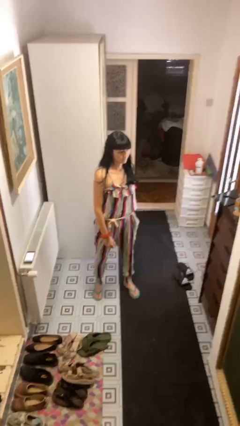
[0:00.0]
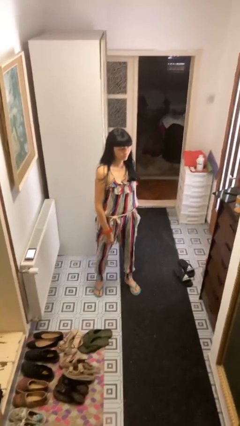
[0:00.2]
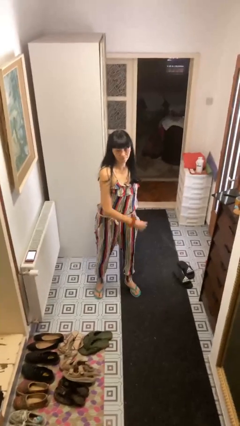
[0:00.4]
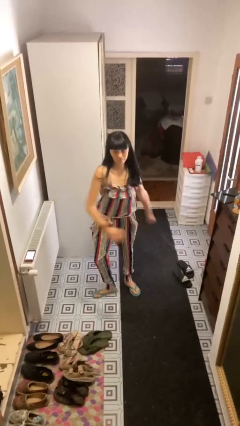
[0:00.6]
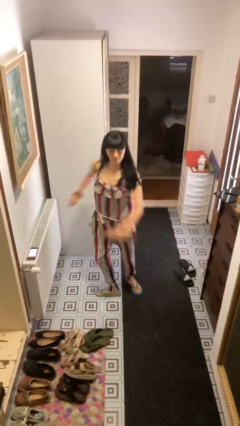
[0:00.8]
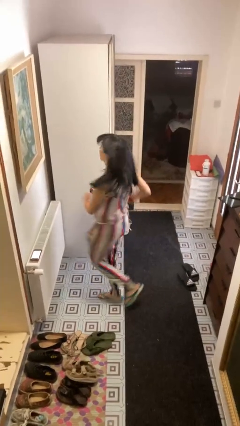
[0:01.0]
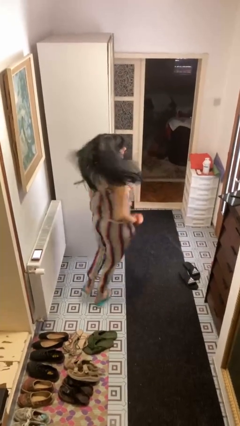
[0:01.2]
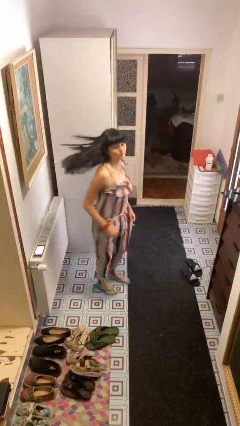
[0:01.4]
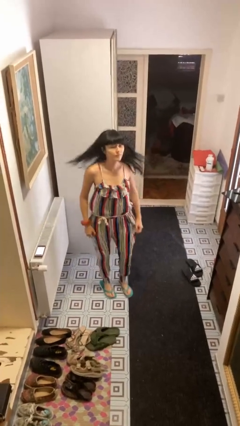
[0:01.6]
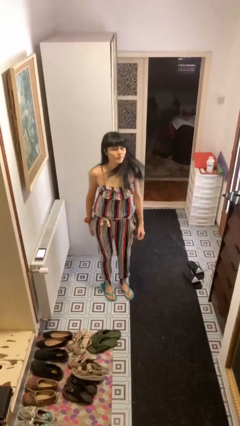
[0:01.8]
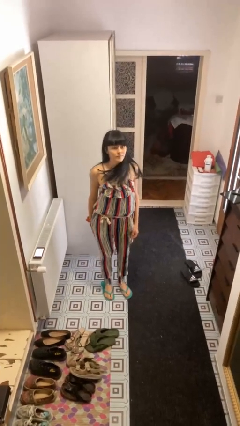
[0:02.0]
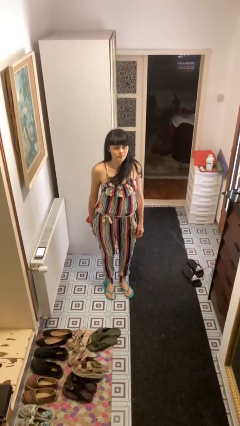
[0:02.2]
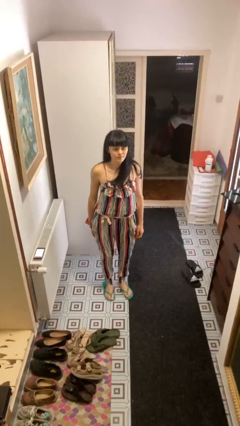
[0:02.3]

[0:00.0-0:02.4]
person twirls

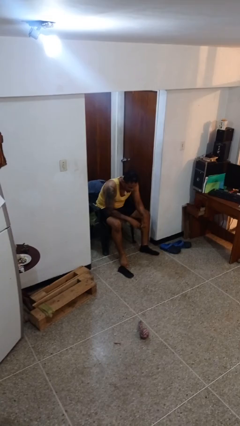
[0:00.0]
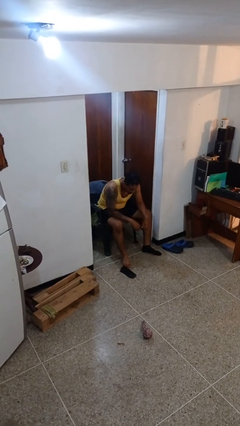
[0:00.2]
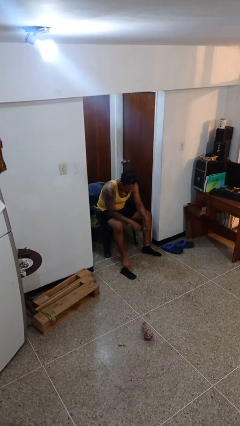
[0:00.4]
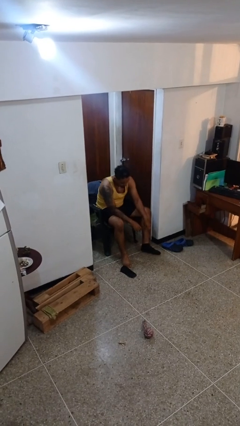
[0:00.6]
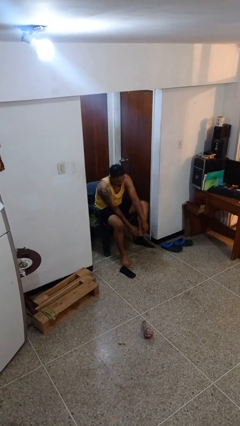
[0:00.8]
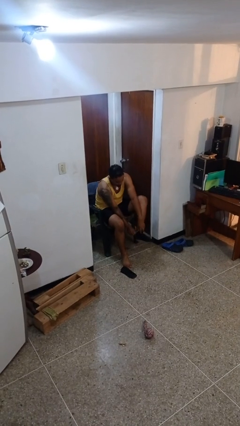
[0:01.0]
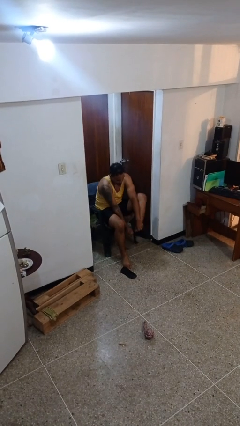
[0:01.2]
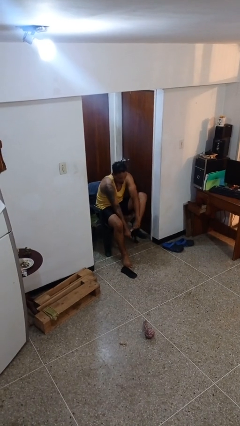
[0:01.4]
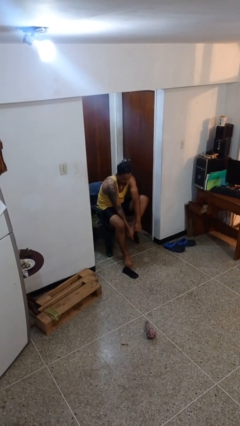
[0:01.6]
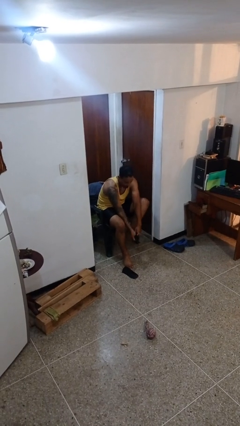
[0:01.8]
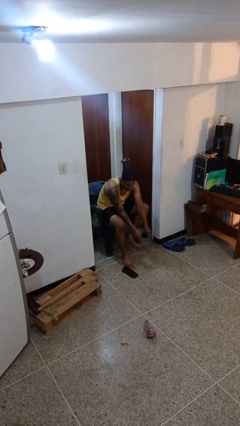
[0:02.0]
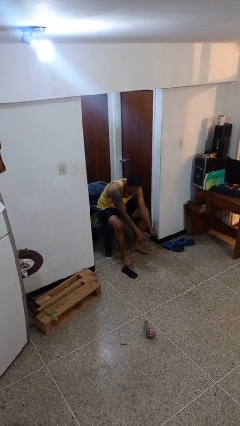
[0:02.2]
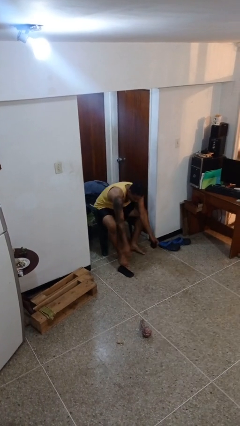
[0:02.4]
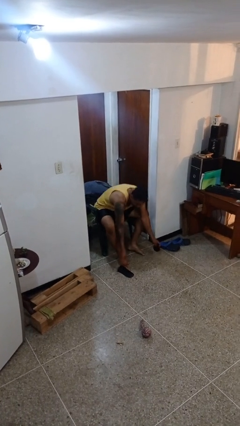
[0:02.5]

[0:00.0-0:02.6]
person takes off socks

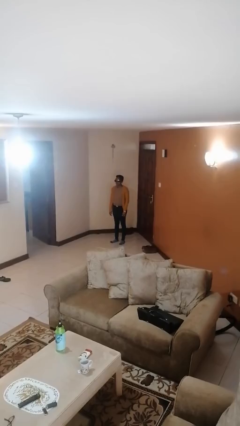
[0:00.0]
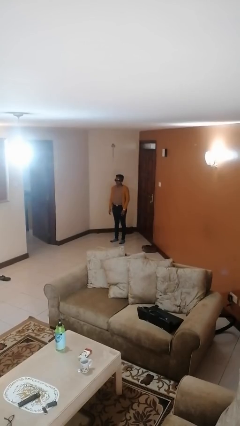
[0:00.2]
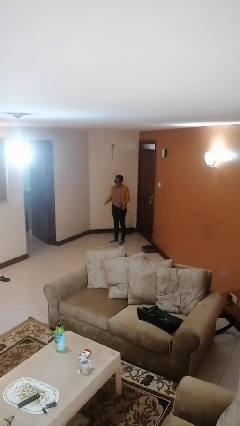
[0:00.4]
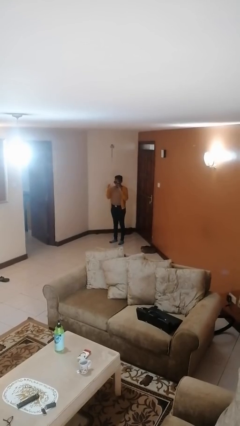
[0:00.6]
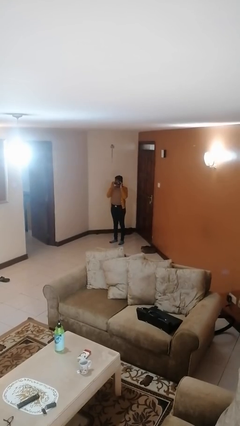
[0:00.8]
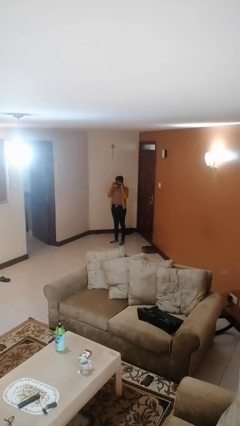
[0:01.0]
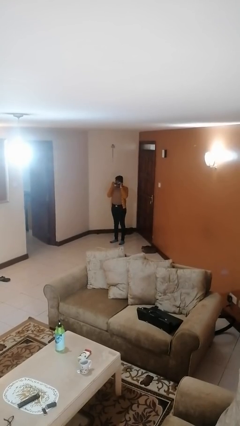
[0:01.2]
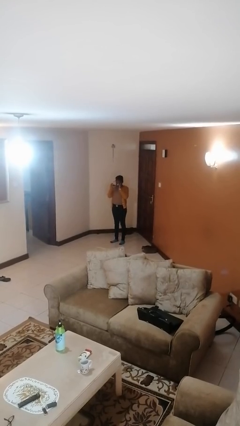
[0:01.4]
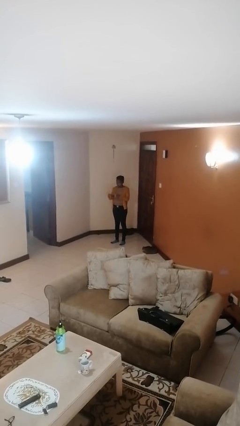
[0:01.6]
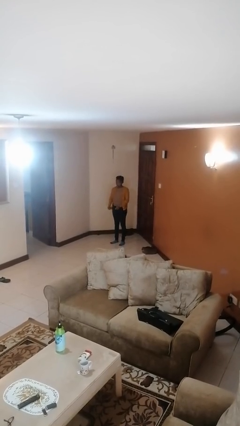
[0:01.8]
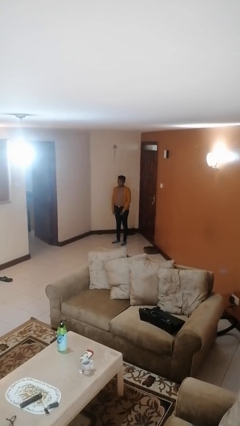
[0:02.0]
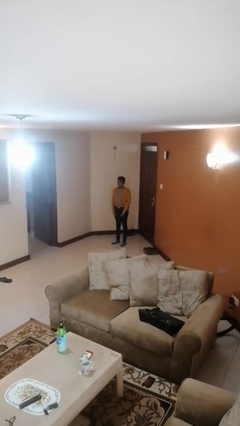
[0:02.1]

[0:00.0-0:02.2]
person takes off sunglasses

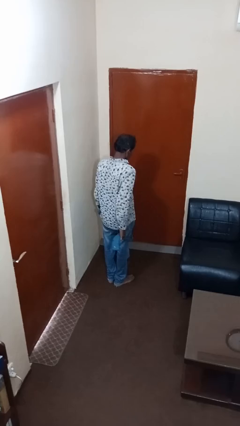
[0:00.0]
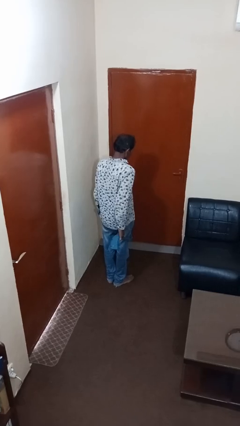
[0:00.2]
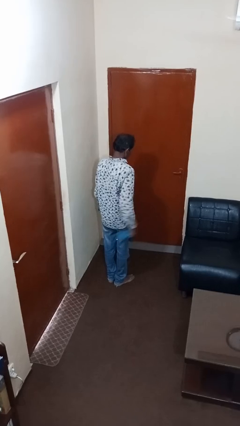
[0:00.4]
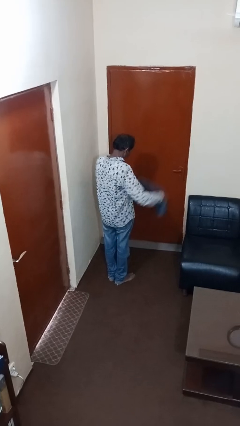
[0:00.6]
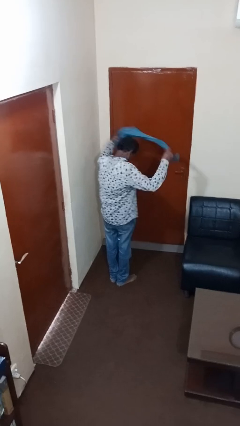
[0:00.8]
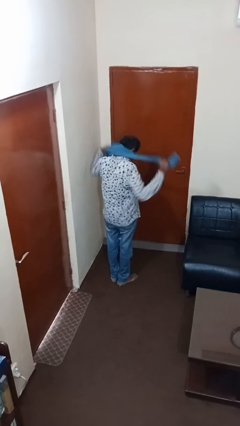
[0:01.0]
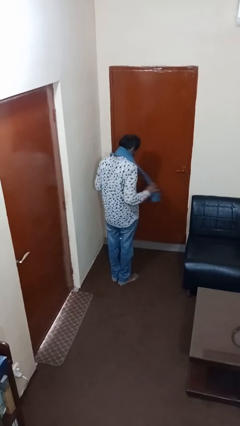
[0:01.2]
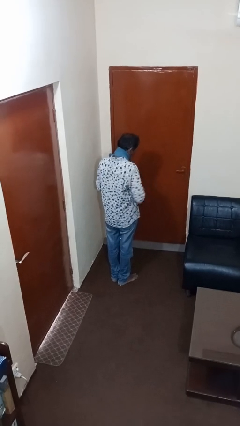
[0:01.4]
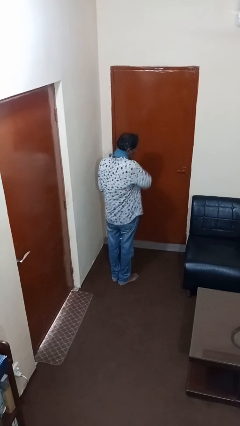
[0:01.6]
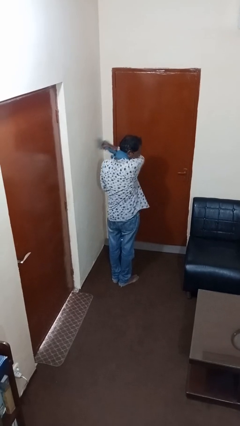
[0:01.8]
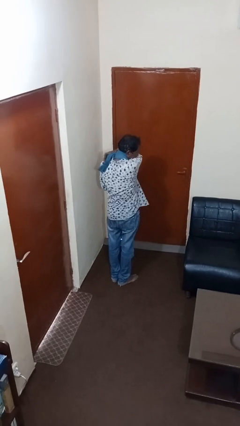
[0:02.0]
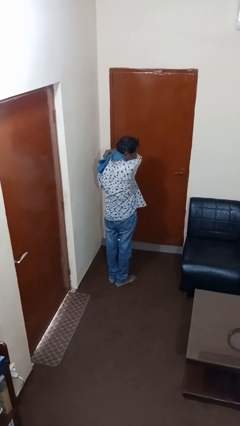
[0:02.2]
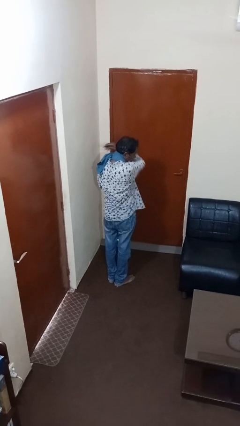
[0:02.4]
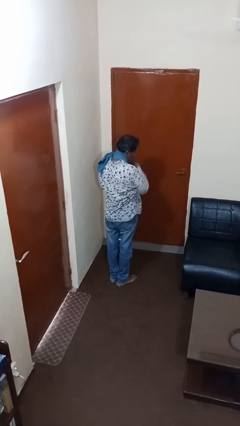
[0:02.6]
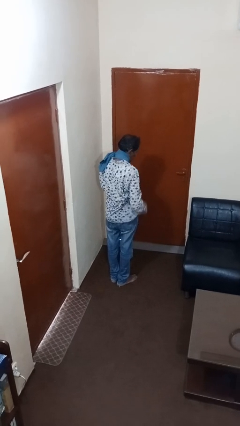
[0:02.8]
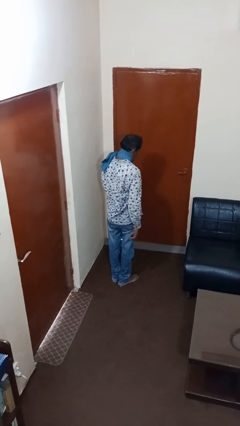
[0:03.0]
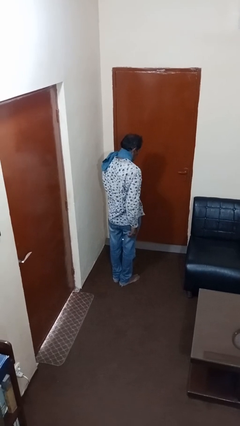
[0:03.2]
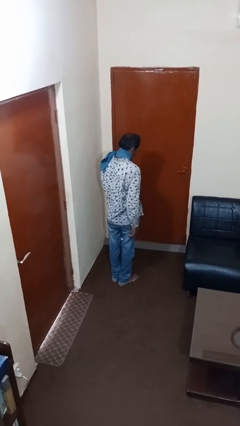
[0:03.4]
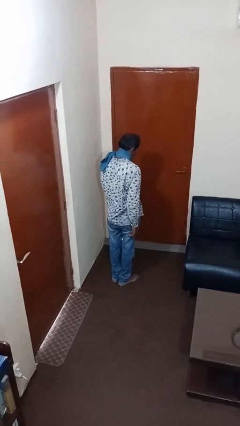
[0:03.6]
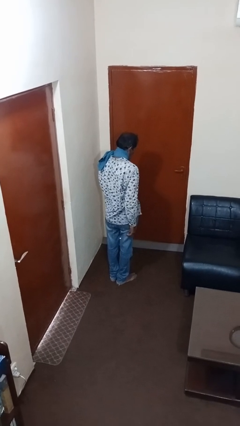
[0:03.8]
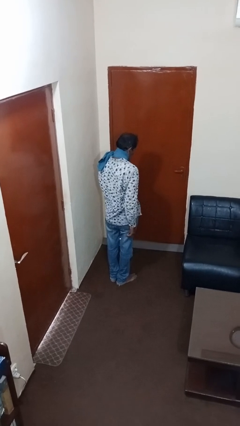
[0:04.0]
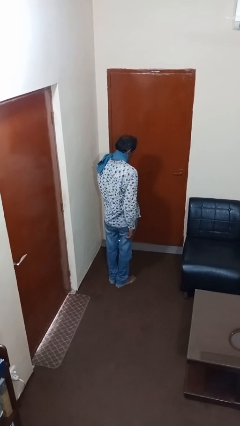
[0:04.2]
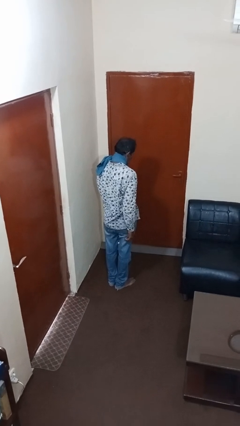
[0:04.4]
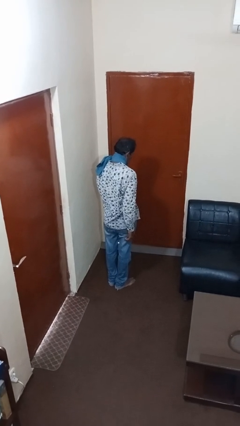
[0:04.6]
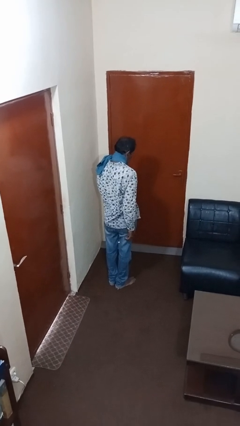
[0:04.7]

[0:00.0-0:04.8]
person puts on scarf

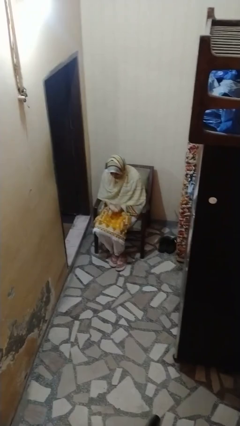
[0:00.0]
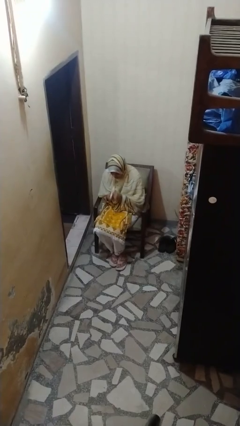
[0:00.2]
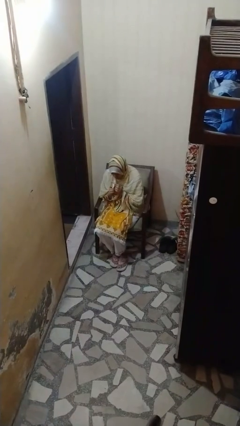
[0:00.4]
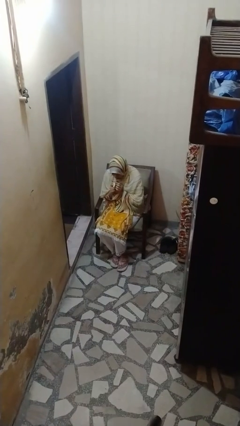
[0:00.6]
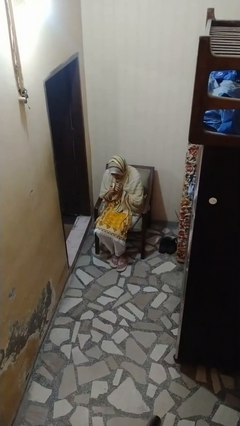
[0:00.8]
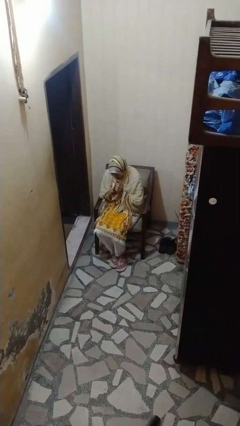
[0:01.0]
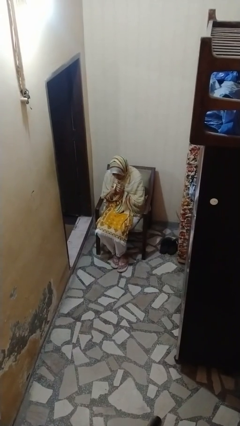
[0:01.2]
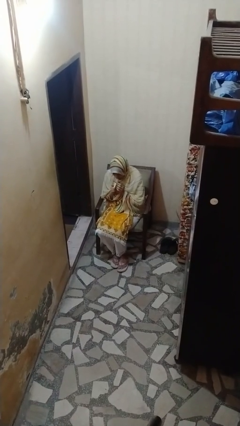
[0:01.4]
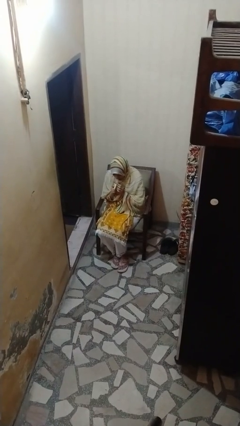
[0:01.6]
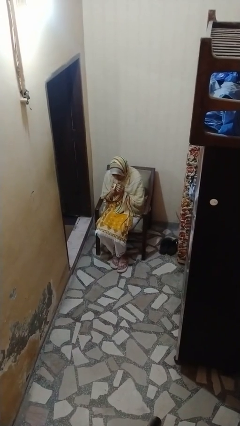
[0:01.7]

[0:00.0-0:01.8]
person eats banana

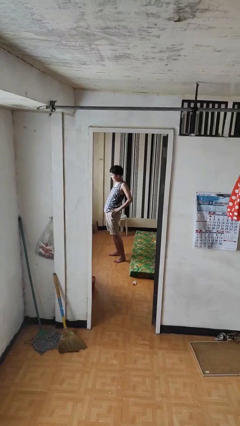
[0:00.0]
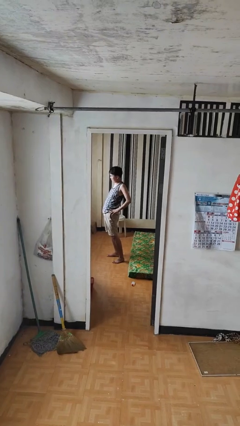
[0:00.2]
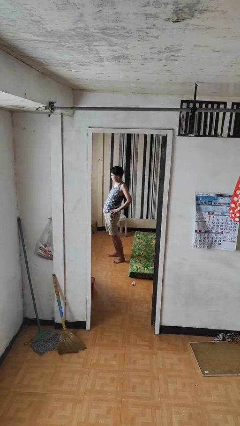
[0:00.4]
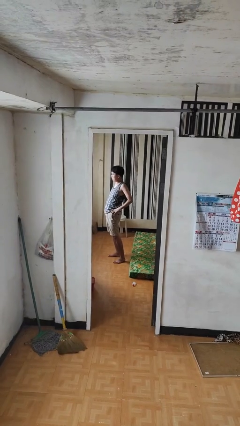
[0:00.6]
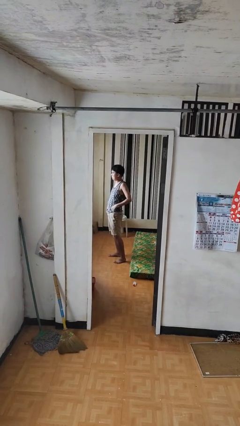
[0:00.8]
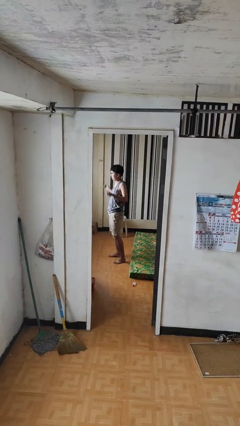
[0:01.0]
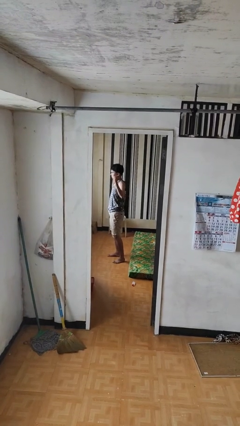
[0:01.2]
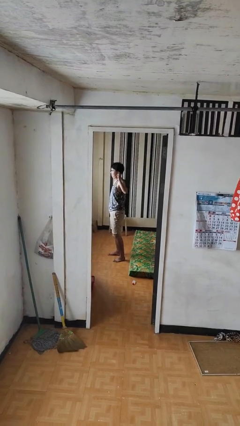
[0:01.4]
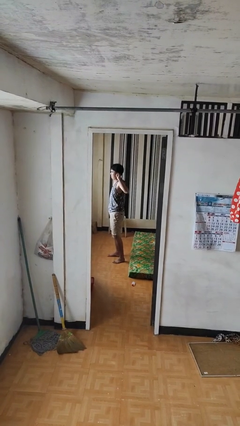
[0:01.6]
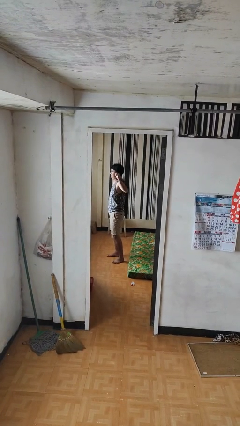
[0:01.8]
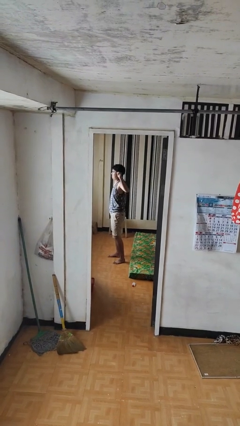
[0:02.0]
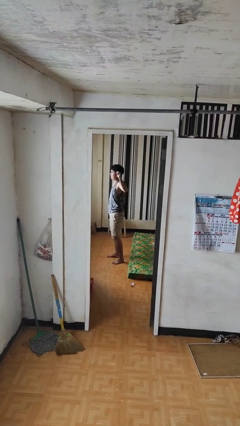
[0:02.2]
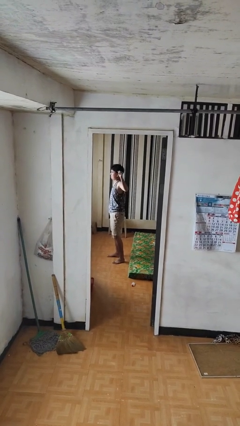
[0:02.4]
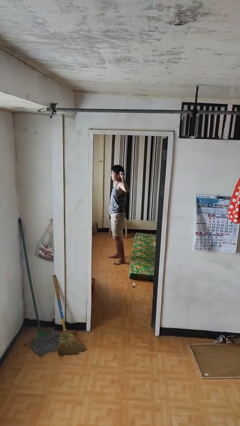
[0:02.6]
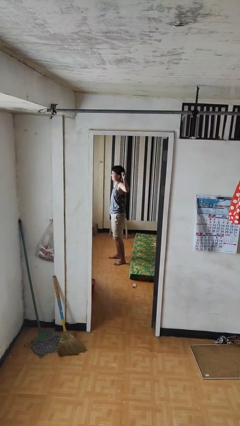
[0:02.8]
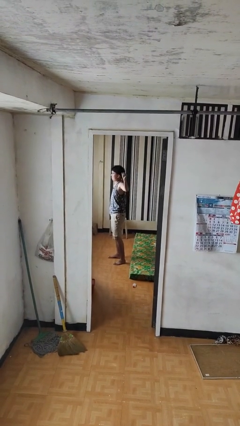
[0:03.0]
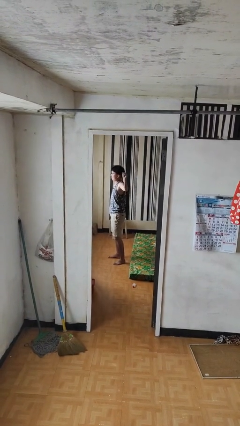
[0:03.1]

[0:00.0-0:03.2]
person stretches arms to side

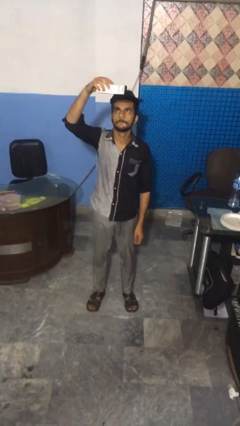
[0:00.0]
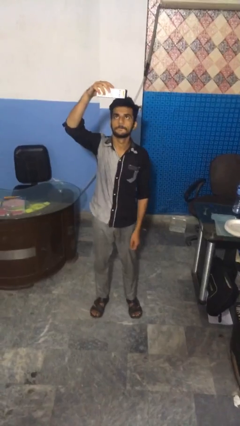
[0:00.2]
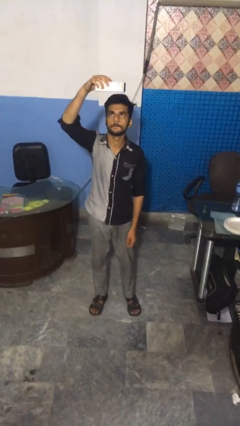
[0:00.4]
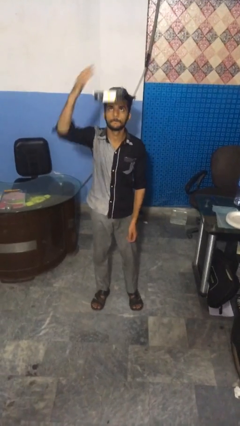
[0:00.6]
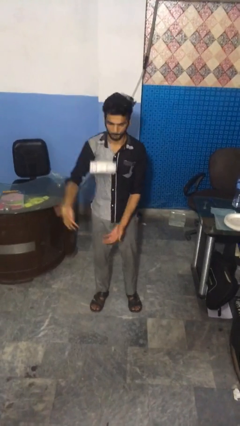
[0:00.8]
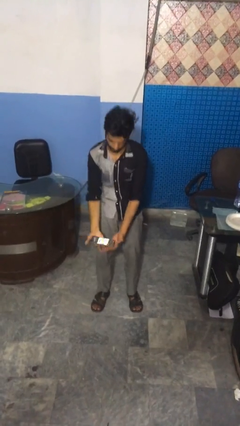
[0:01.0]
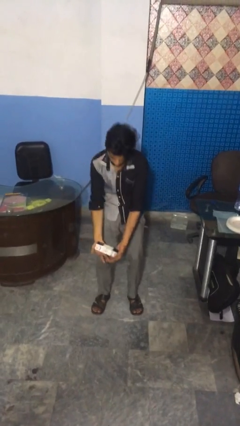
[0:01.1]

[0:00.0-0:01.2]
person drops object
